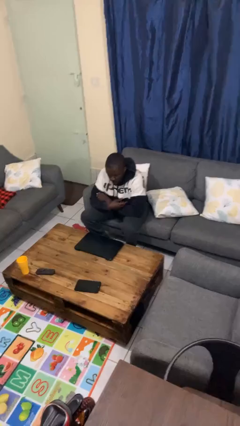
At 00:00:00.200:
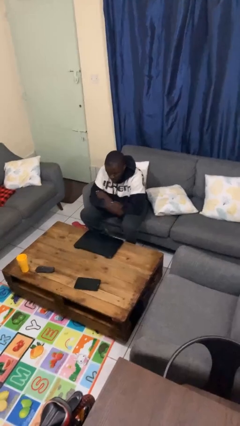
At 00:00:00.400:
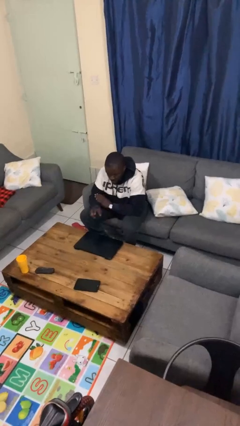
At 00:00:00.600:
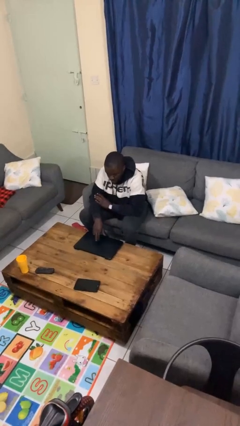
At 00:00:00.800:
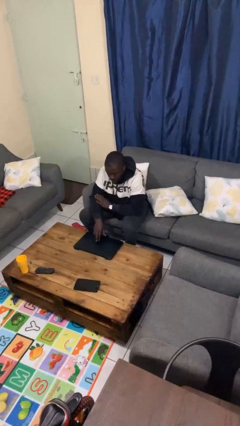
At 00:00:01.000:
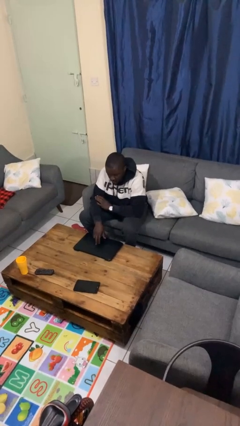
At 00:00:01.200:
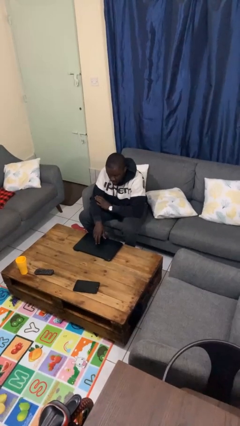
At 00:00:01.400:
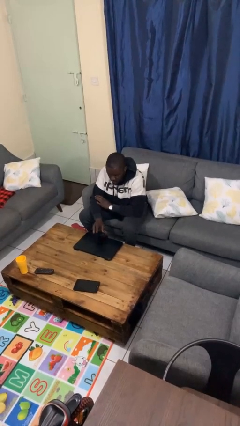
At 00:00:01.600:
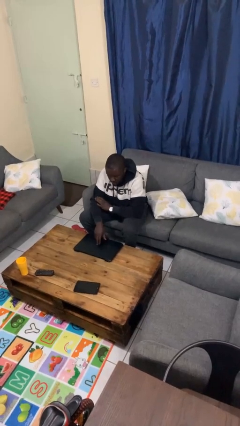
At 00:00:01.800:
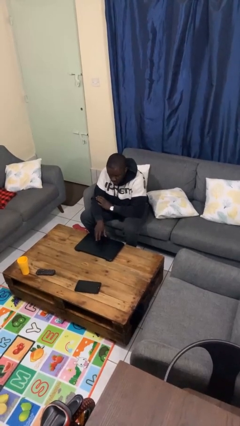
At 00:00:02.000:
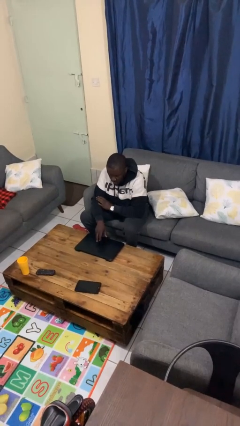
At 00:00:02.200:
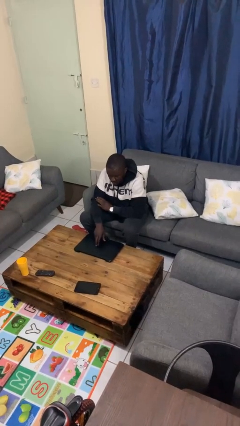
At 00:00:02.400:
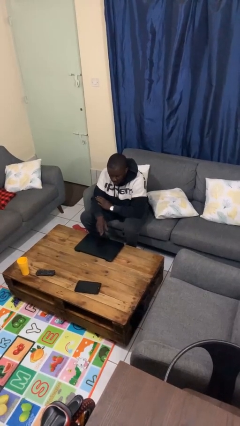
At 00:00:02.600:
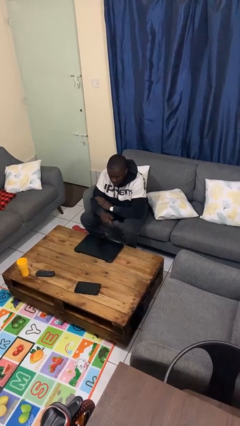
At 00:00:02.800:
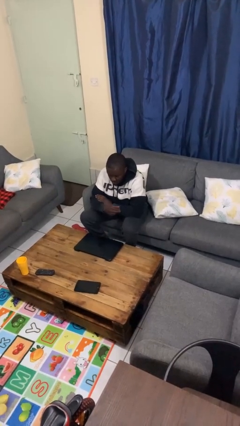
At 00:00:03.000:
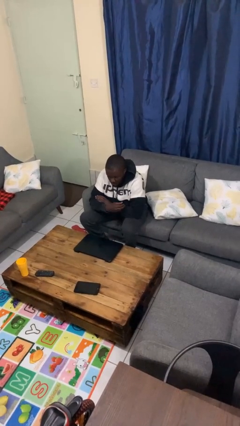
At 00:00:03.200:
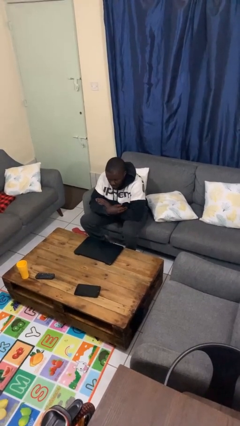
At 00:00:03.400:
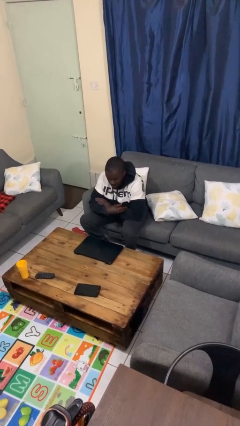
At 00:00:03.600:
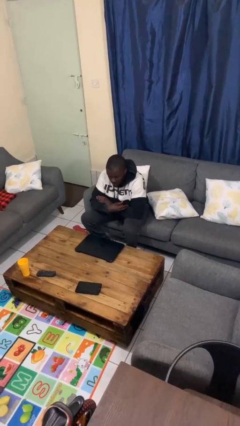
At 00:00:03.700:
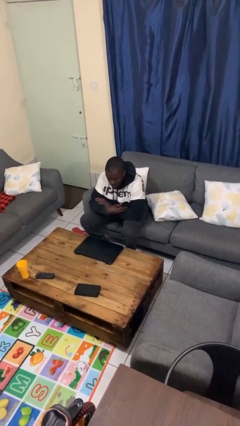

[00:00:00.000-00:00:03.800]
person taps object with finger

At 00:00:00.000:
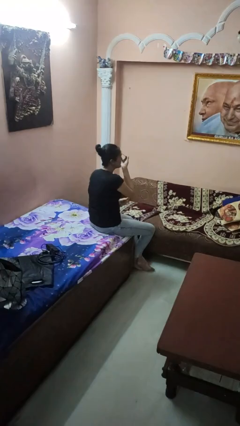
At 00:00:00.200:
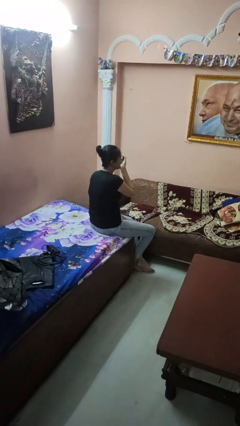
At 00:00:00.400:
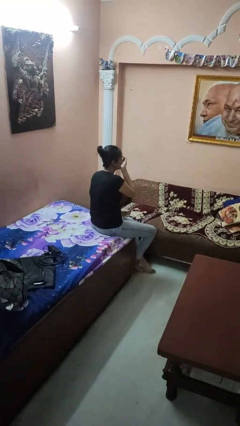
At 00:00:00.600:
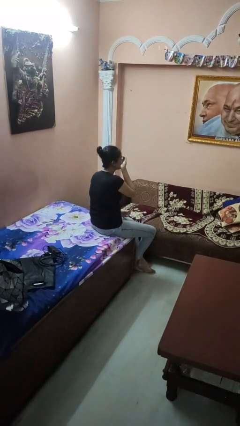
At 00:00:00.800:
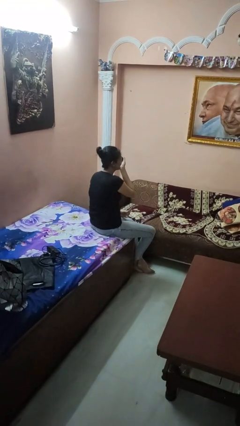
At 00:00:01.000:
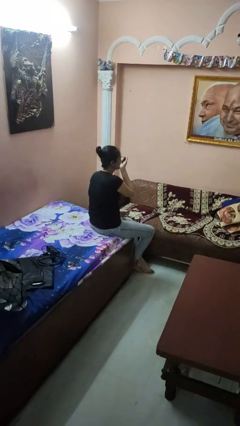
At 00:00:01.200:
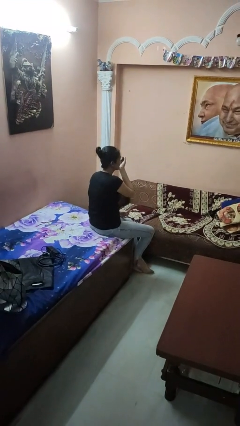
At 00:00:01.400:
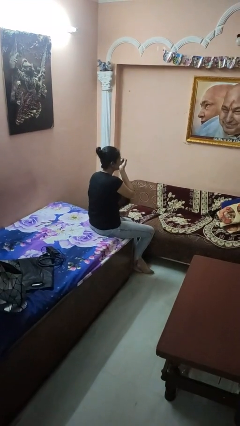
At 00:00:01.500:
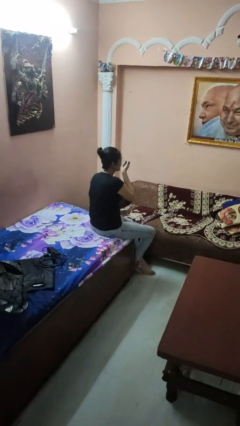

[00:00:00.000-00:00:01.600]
person applies eye makeup

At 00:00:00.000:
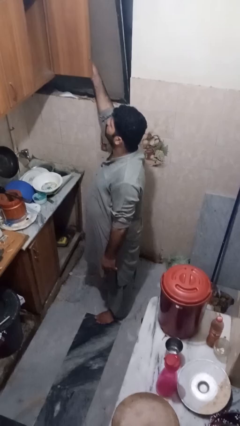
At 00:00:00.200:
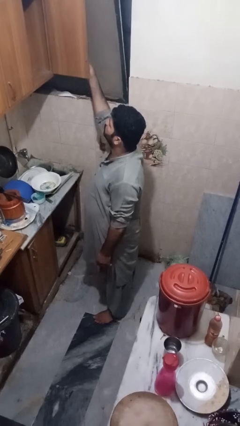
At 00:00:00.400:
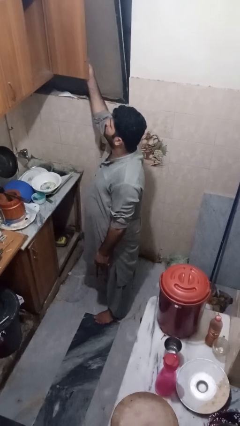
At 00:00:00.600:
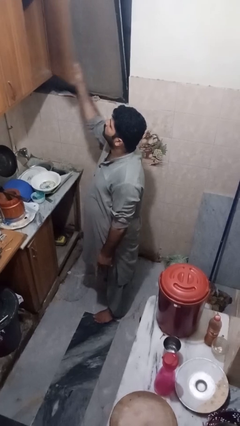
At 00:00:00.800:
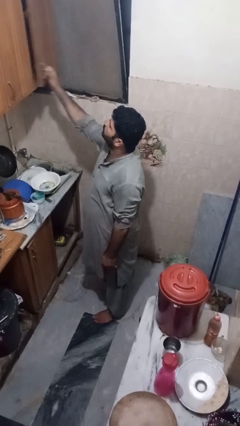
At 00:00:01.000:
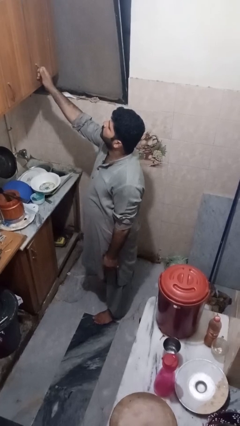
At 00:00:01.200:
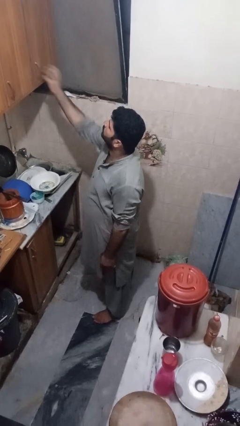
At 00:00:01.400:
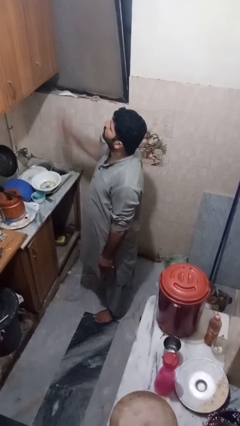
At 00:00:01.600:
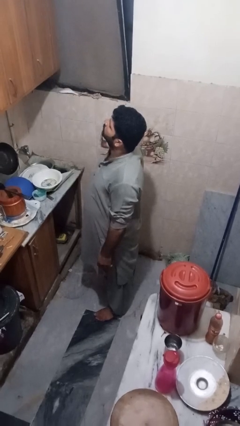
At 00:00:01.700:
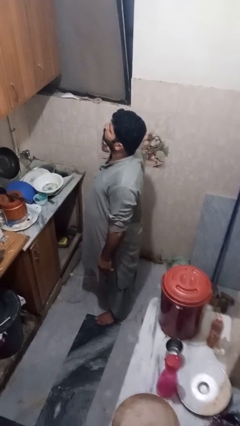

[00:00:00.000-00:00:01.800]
person closes cabinet

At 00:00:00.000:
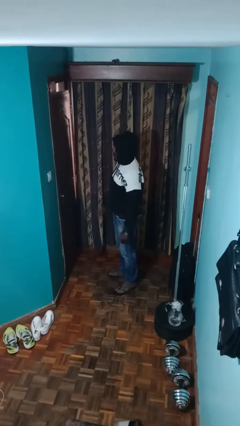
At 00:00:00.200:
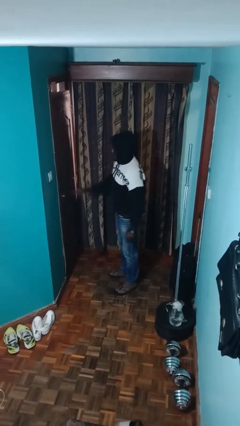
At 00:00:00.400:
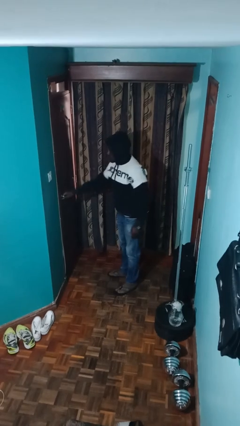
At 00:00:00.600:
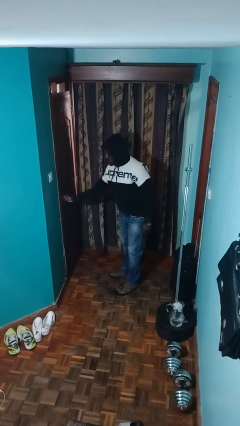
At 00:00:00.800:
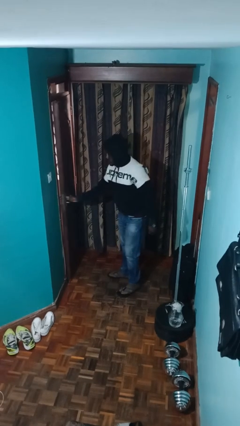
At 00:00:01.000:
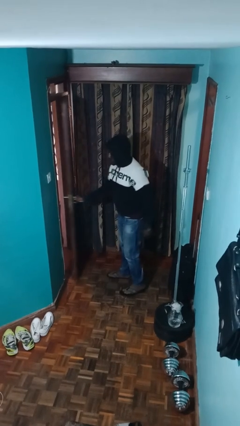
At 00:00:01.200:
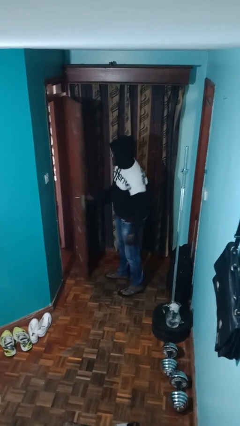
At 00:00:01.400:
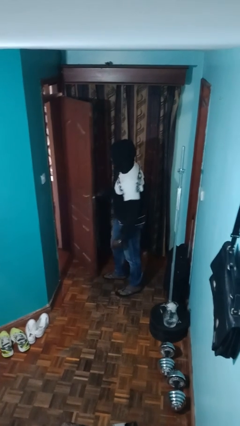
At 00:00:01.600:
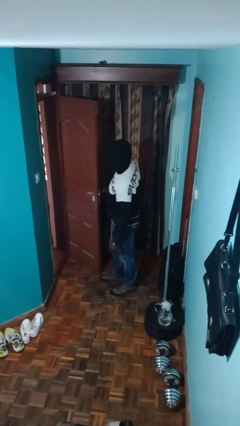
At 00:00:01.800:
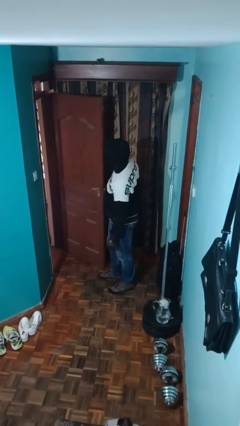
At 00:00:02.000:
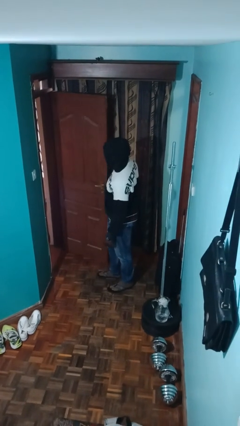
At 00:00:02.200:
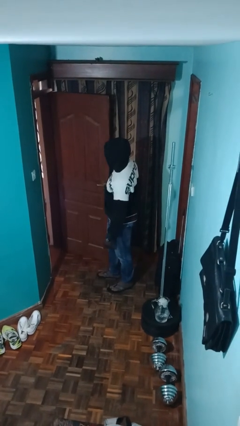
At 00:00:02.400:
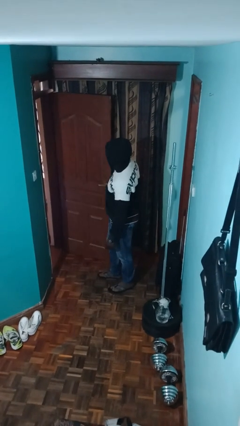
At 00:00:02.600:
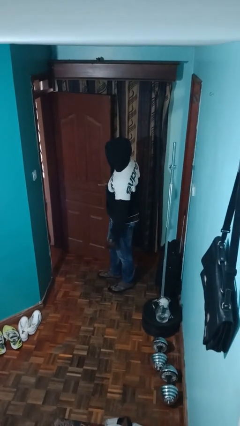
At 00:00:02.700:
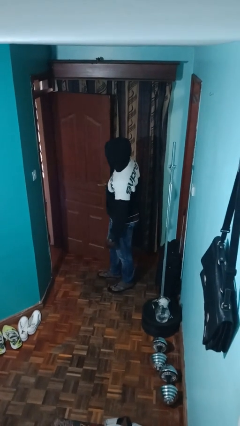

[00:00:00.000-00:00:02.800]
person opens facility door

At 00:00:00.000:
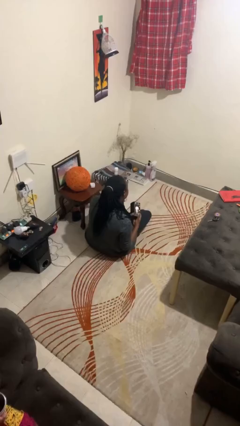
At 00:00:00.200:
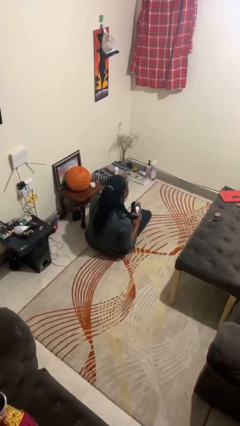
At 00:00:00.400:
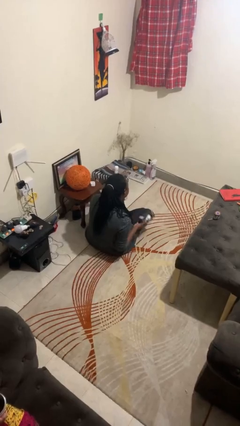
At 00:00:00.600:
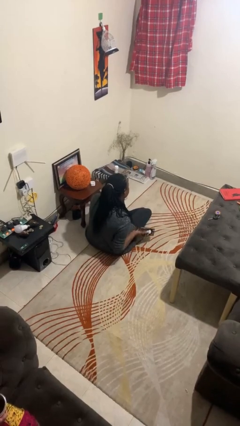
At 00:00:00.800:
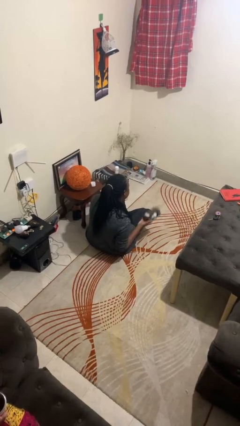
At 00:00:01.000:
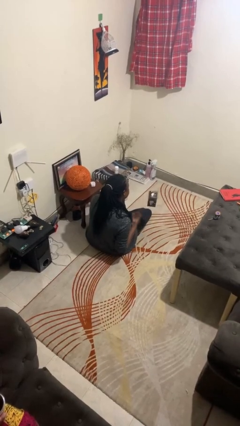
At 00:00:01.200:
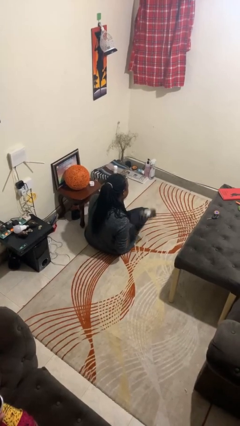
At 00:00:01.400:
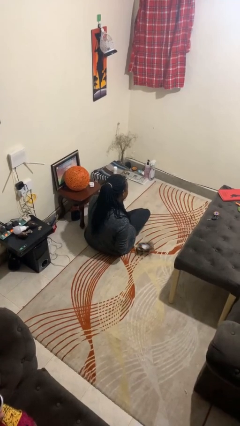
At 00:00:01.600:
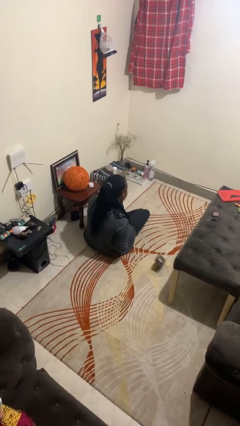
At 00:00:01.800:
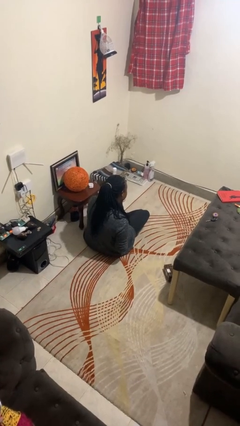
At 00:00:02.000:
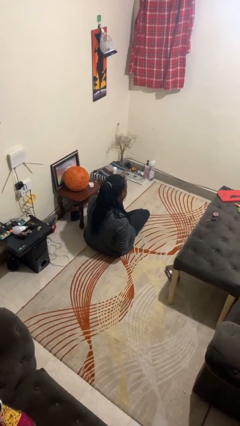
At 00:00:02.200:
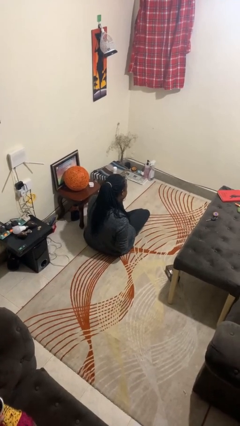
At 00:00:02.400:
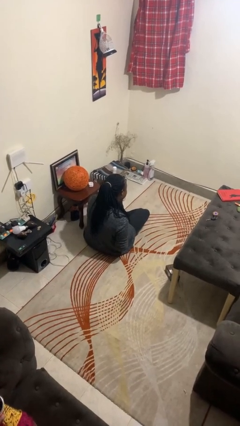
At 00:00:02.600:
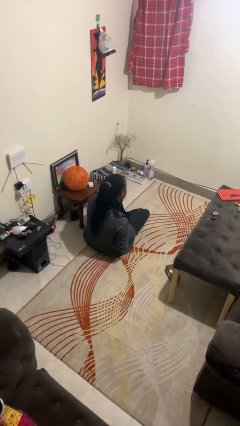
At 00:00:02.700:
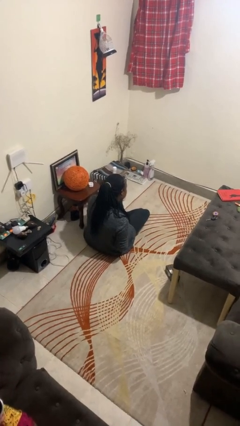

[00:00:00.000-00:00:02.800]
person throws object into air

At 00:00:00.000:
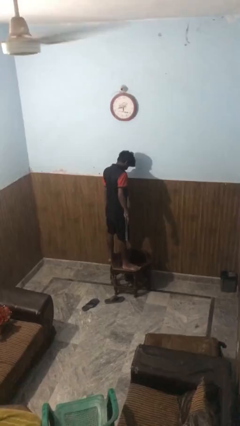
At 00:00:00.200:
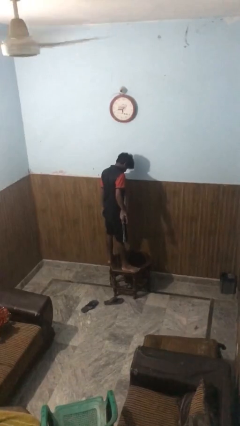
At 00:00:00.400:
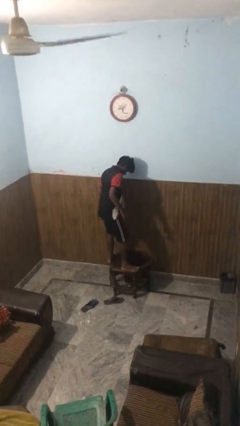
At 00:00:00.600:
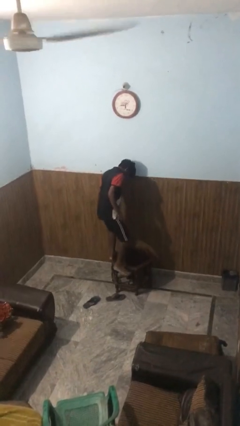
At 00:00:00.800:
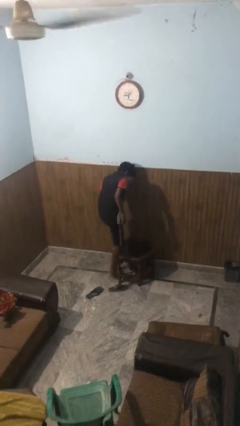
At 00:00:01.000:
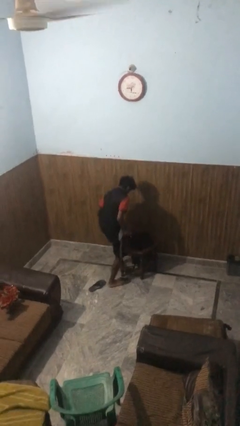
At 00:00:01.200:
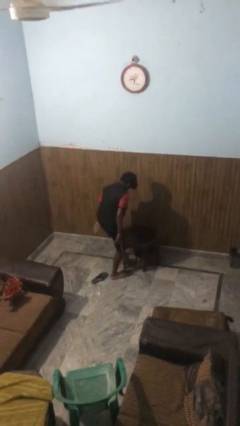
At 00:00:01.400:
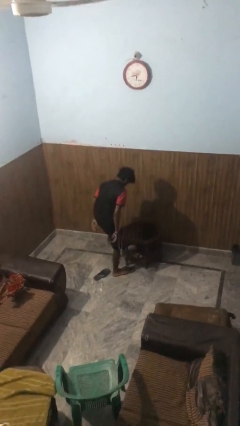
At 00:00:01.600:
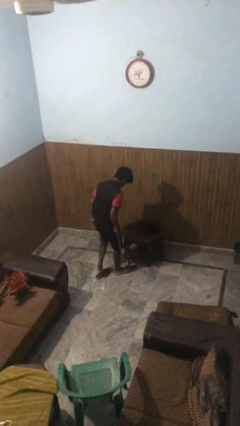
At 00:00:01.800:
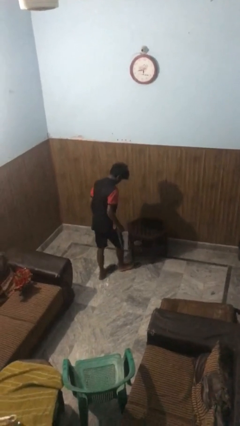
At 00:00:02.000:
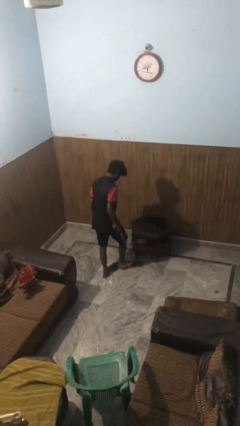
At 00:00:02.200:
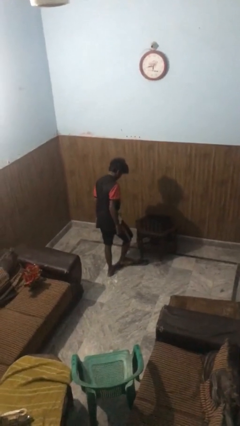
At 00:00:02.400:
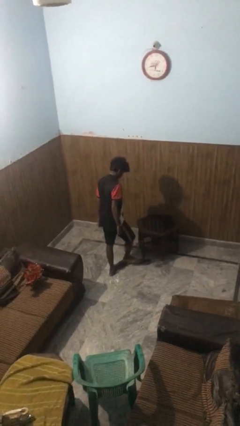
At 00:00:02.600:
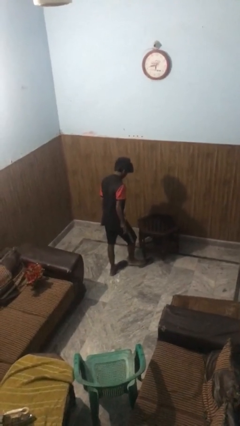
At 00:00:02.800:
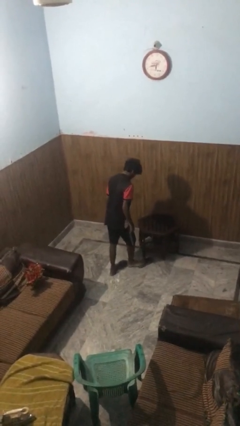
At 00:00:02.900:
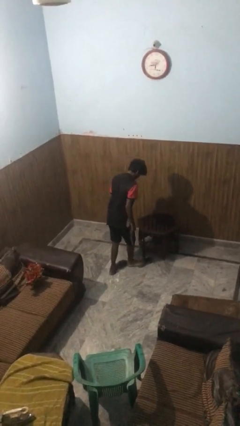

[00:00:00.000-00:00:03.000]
person climbs off table

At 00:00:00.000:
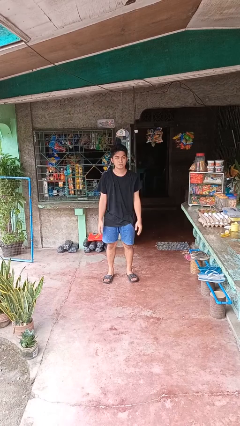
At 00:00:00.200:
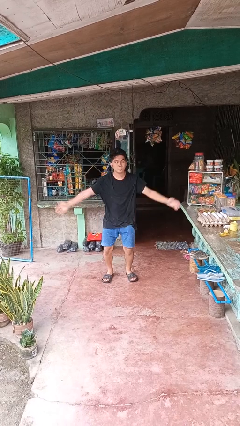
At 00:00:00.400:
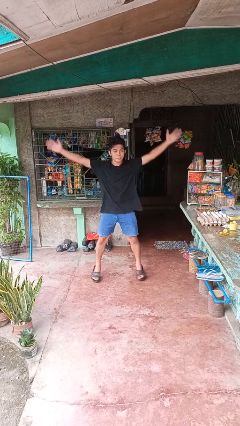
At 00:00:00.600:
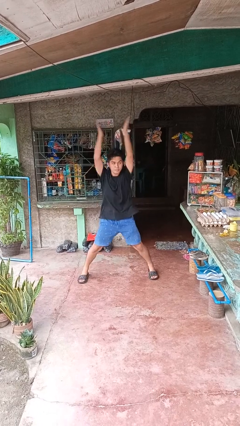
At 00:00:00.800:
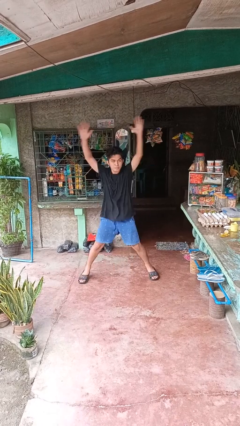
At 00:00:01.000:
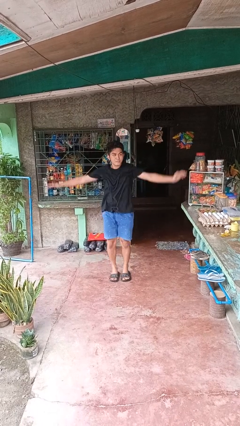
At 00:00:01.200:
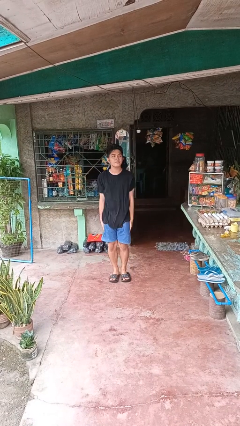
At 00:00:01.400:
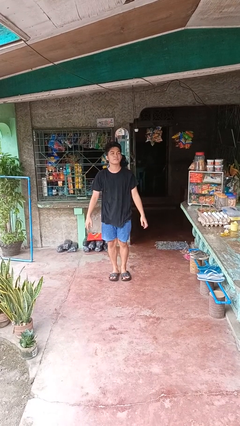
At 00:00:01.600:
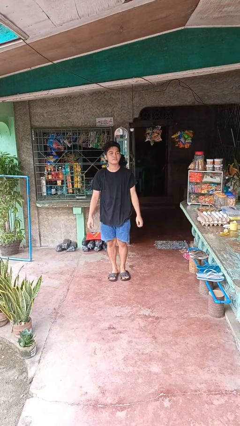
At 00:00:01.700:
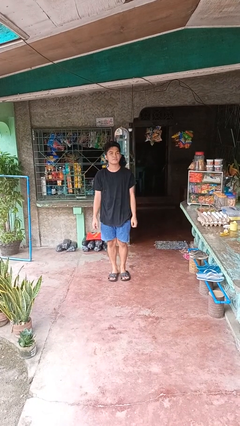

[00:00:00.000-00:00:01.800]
person exercises with jumping jacks
